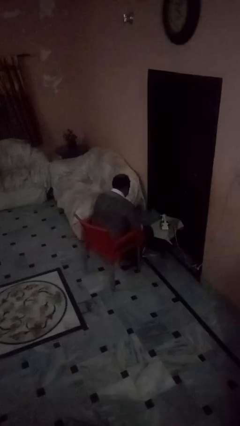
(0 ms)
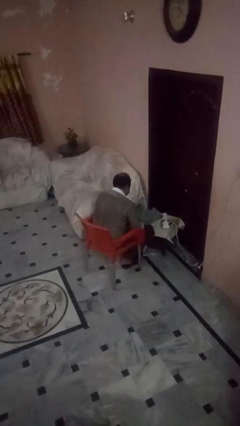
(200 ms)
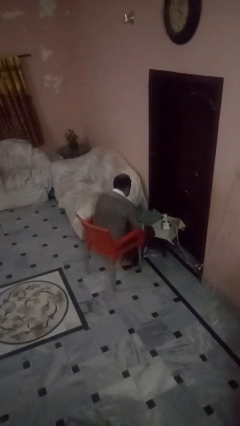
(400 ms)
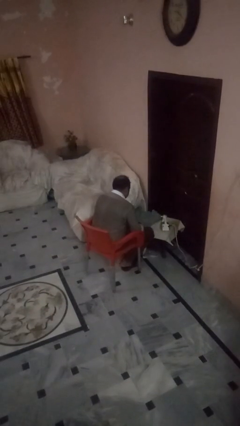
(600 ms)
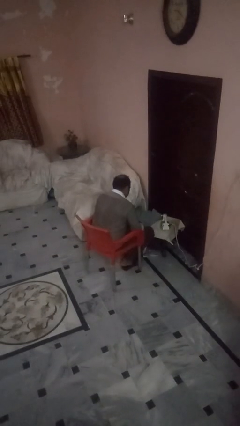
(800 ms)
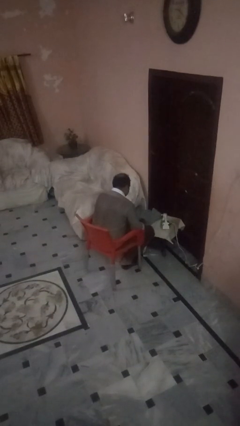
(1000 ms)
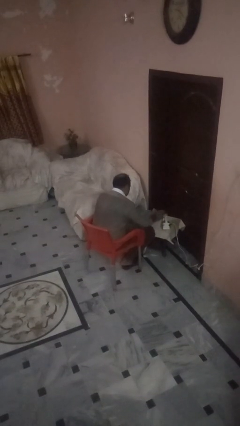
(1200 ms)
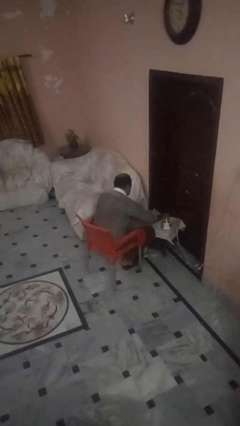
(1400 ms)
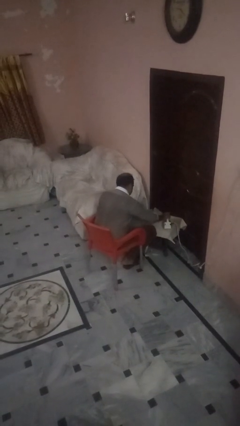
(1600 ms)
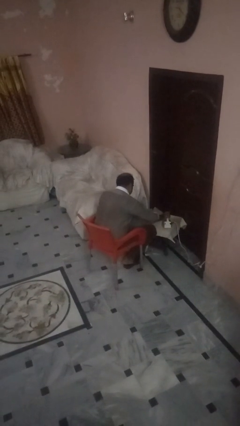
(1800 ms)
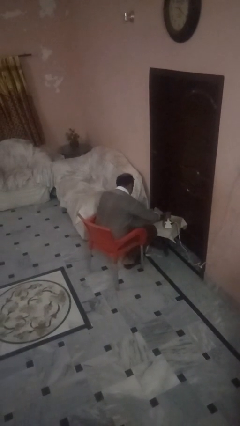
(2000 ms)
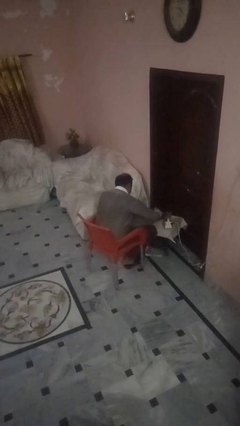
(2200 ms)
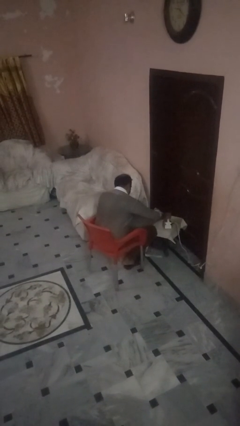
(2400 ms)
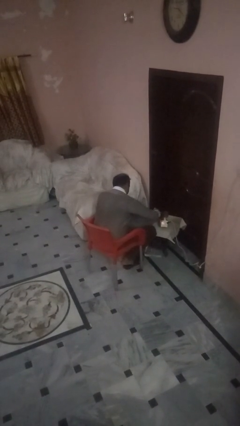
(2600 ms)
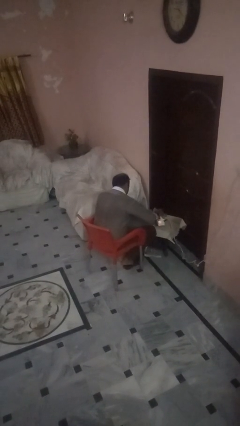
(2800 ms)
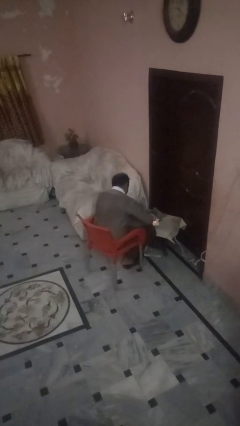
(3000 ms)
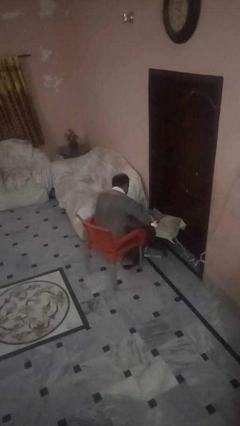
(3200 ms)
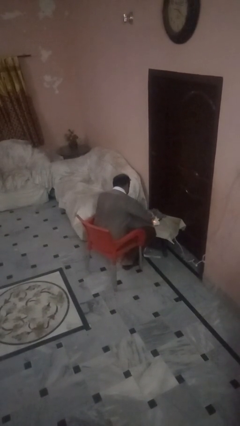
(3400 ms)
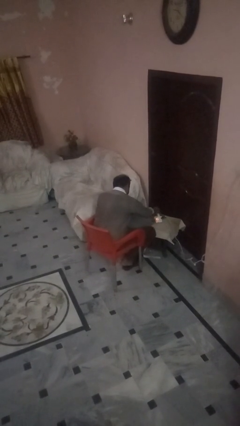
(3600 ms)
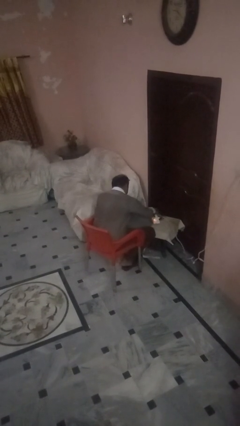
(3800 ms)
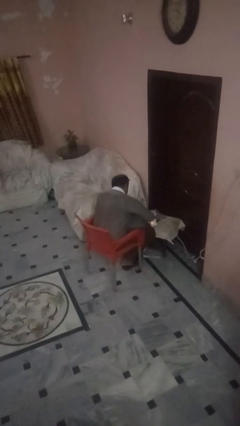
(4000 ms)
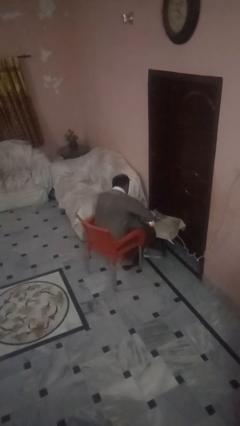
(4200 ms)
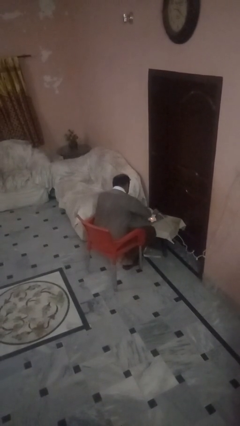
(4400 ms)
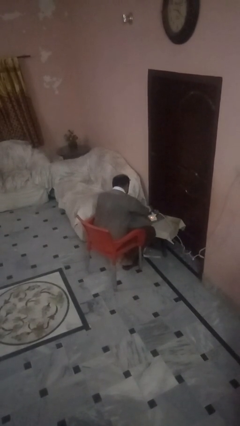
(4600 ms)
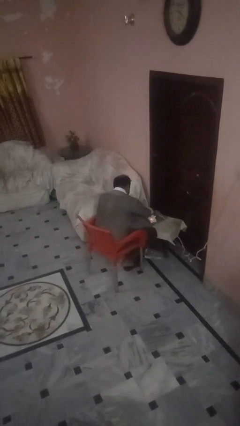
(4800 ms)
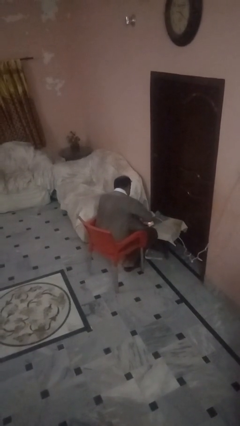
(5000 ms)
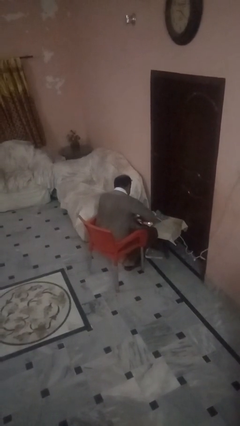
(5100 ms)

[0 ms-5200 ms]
person irons clothes

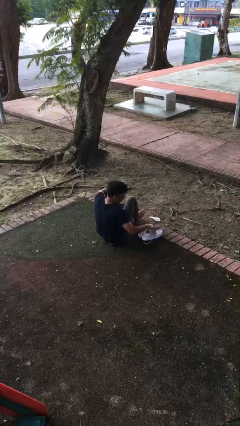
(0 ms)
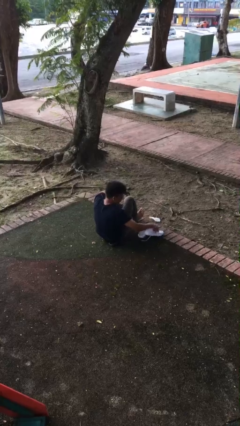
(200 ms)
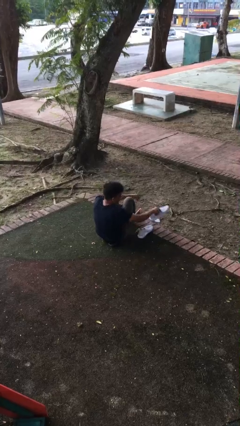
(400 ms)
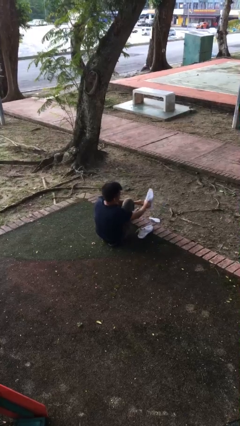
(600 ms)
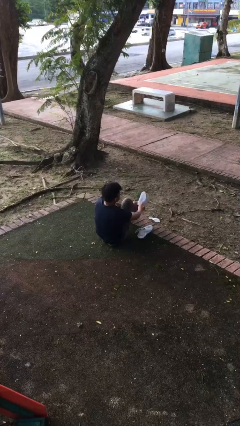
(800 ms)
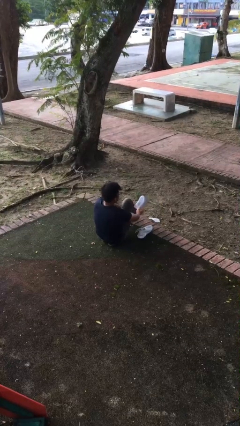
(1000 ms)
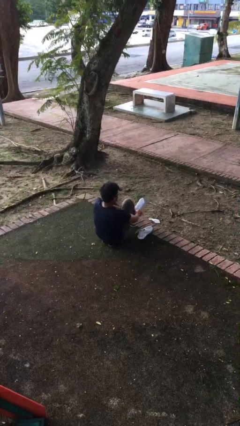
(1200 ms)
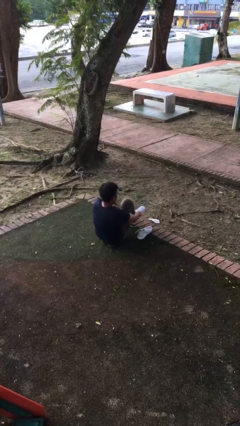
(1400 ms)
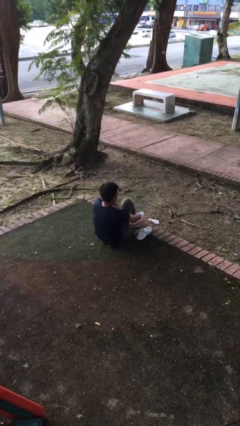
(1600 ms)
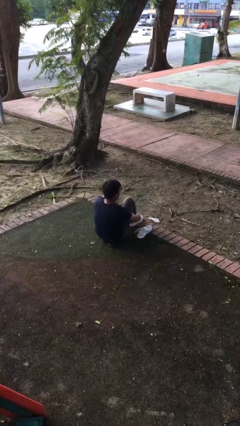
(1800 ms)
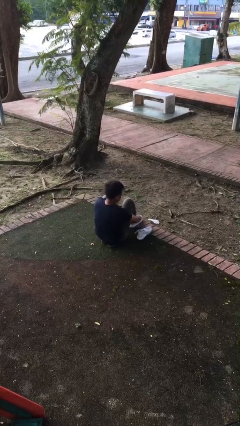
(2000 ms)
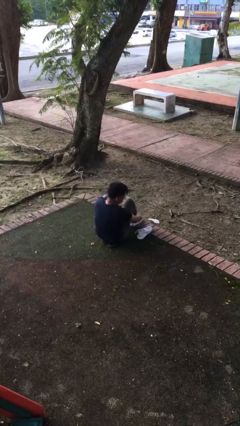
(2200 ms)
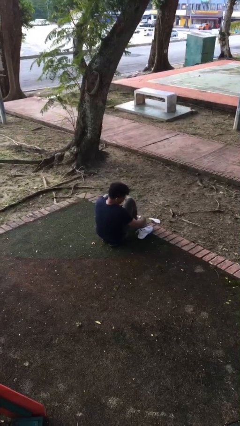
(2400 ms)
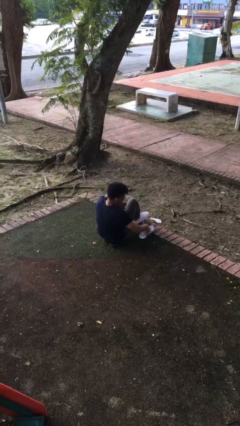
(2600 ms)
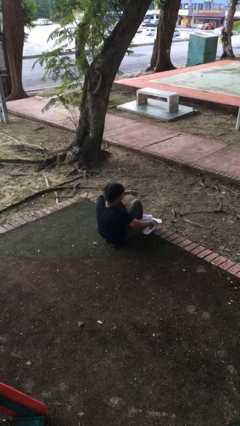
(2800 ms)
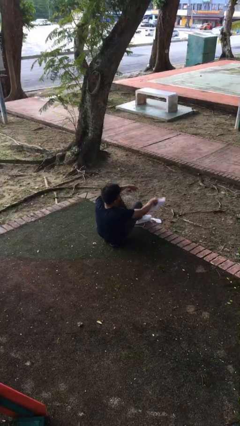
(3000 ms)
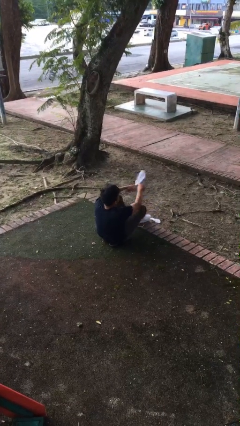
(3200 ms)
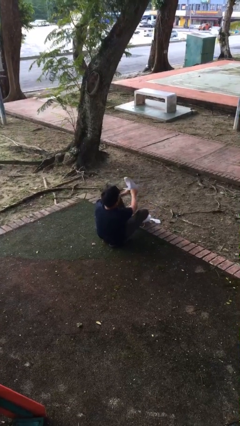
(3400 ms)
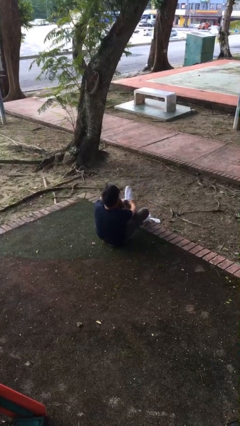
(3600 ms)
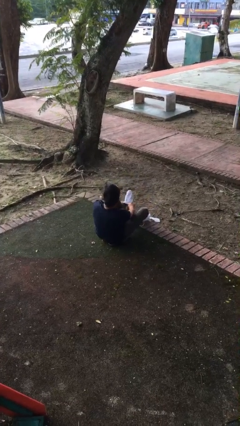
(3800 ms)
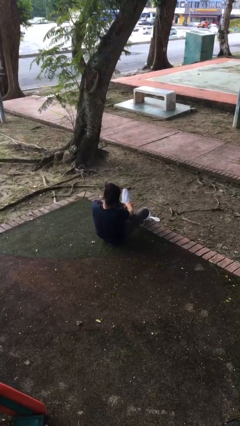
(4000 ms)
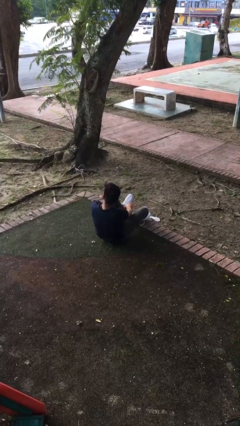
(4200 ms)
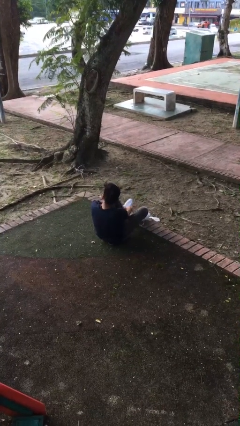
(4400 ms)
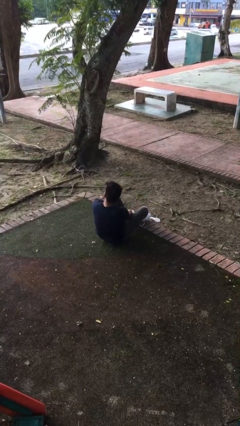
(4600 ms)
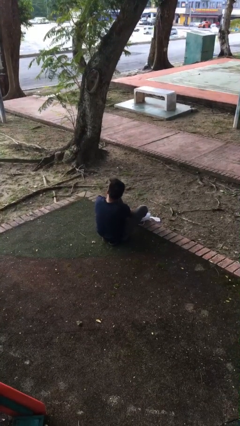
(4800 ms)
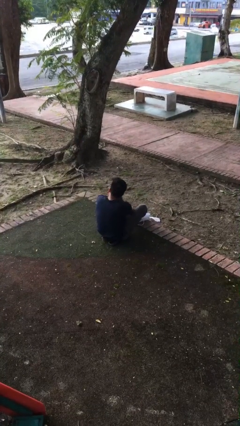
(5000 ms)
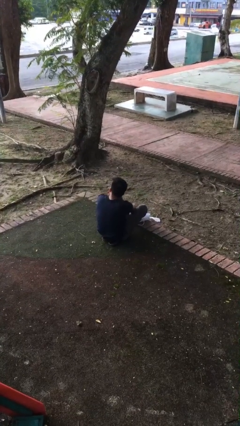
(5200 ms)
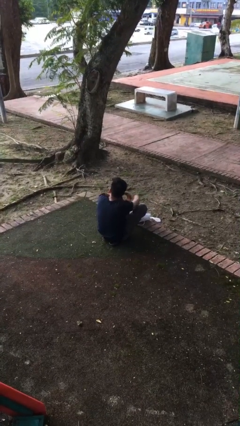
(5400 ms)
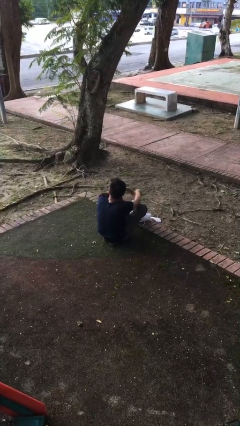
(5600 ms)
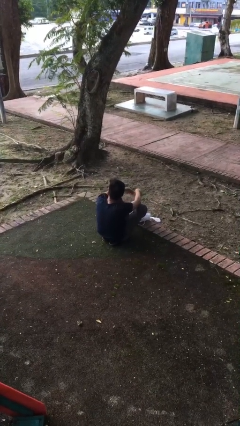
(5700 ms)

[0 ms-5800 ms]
person puts on shoes

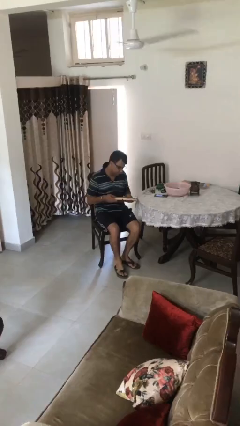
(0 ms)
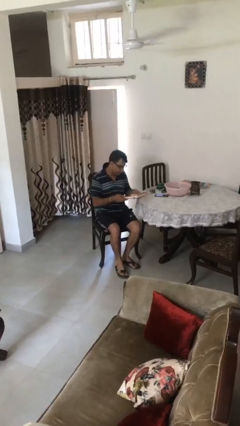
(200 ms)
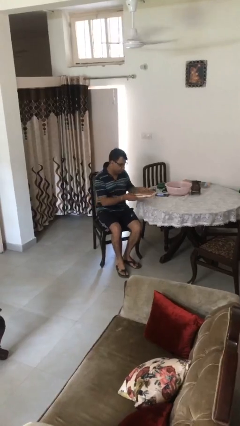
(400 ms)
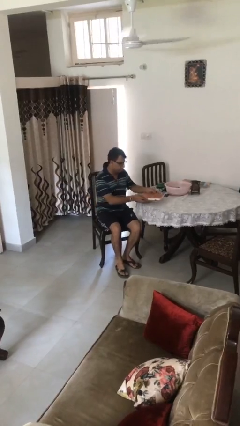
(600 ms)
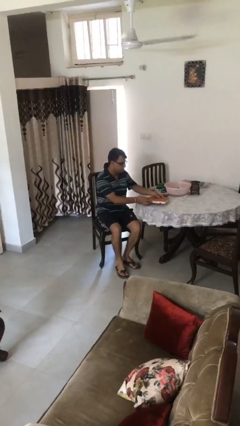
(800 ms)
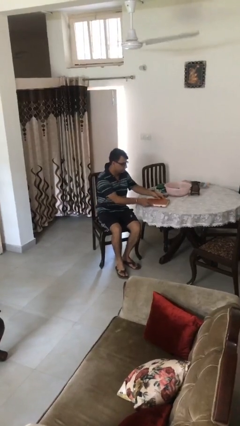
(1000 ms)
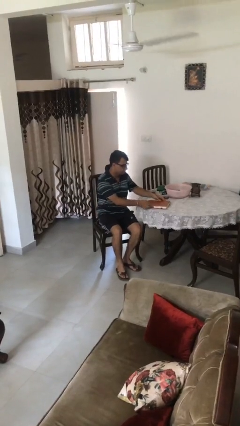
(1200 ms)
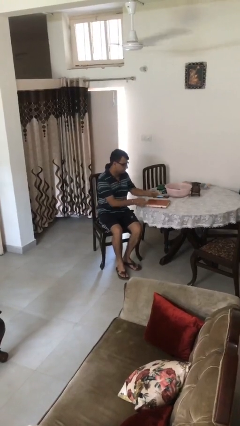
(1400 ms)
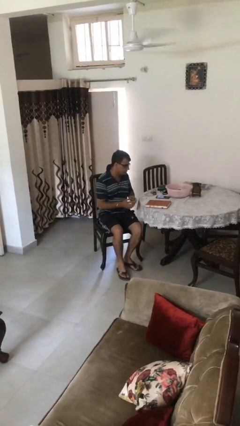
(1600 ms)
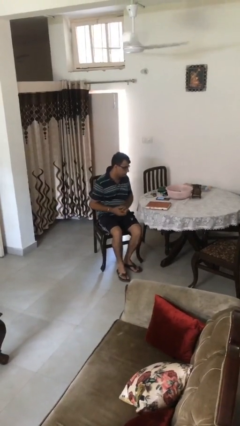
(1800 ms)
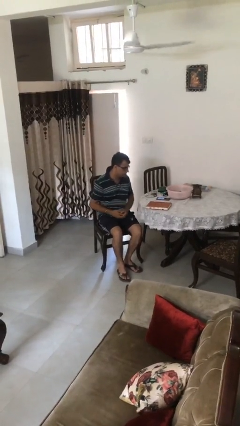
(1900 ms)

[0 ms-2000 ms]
person puts down object on table

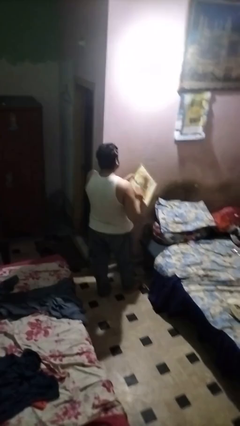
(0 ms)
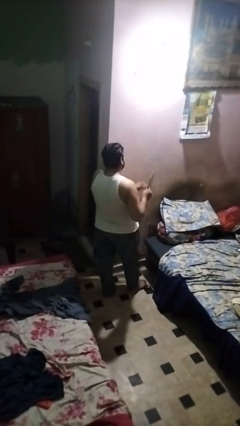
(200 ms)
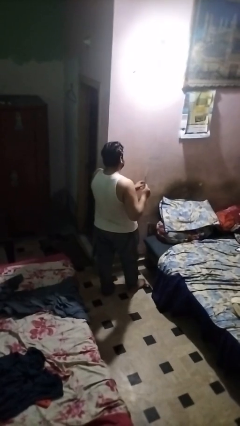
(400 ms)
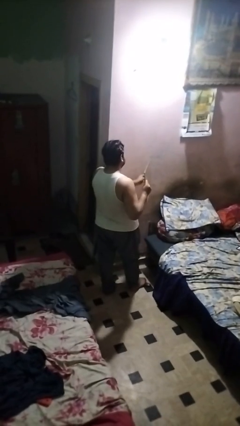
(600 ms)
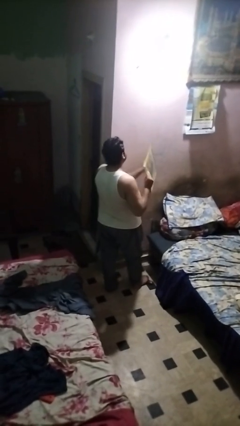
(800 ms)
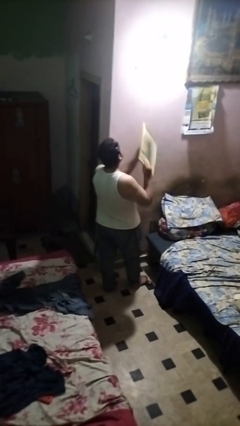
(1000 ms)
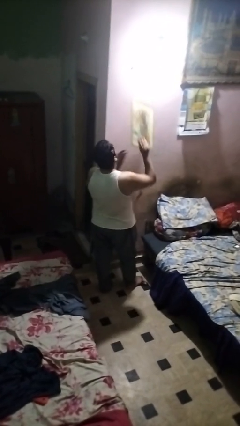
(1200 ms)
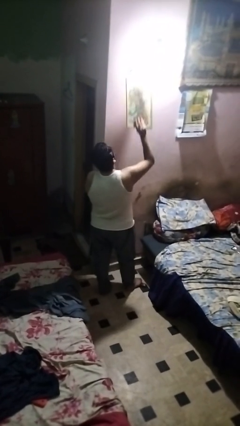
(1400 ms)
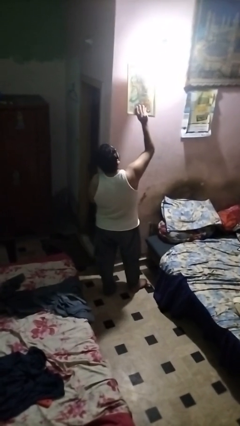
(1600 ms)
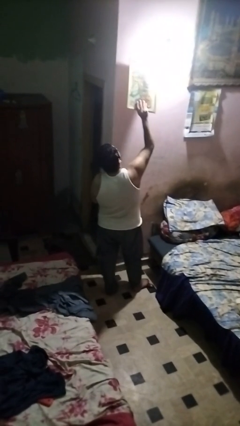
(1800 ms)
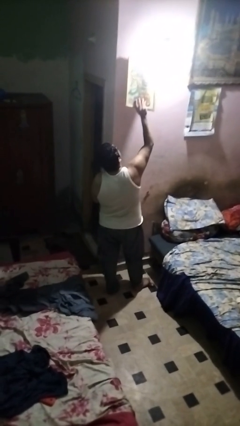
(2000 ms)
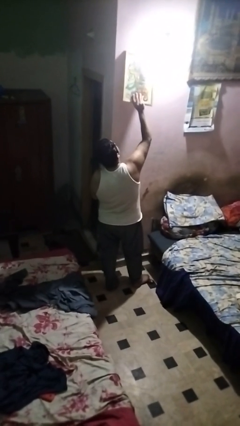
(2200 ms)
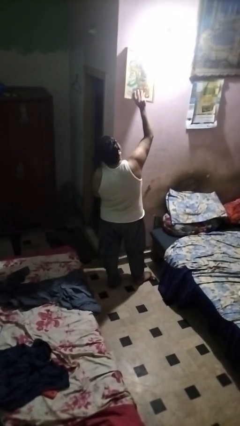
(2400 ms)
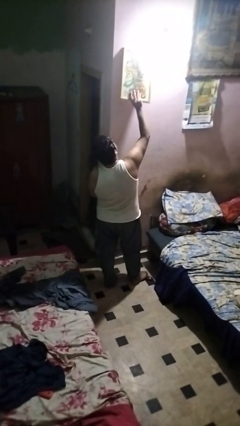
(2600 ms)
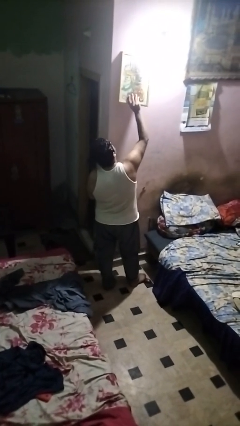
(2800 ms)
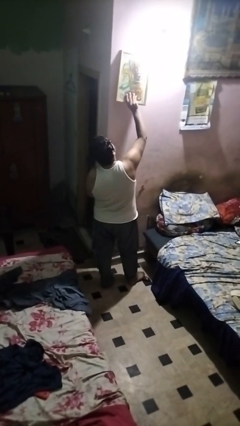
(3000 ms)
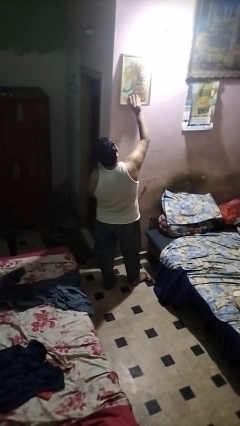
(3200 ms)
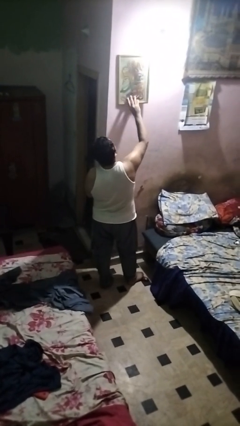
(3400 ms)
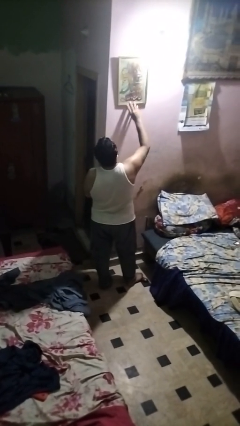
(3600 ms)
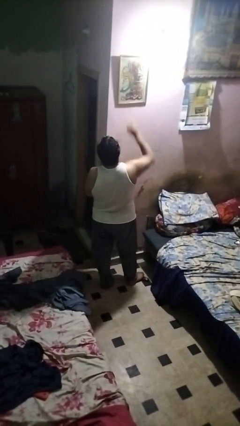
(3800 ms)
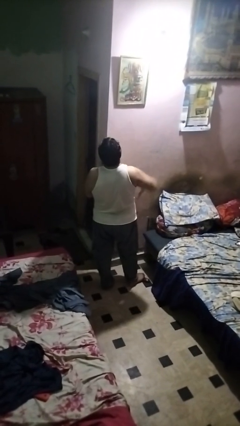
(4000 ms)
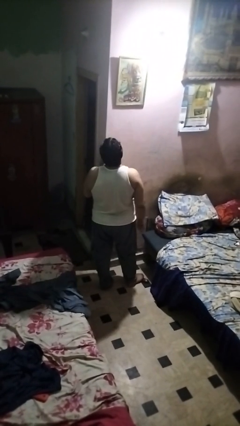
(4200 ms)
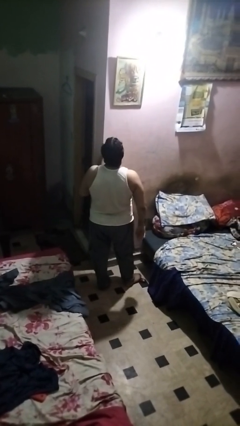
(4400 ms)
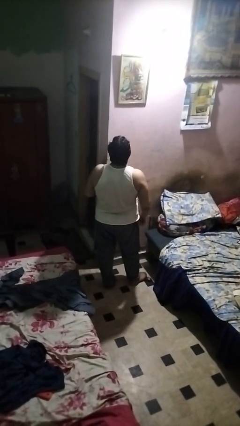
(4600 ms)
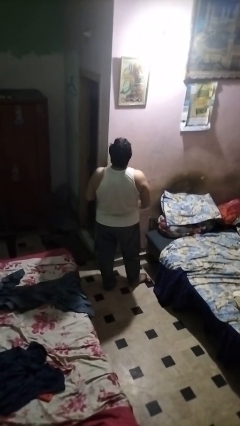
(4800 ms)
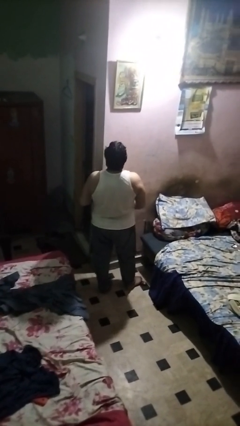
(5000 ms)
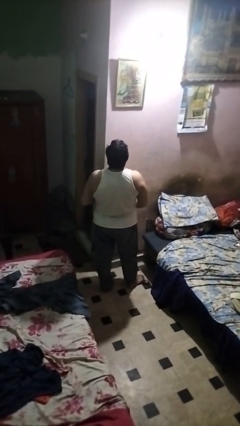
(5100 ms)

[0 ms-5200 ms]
person puts up picture frame
